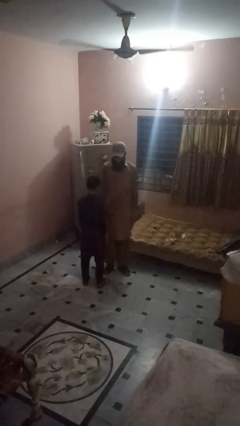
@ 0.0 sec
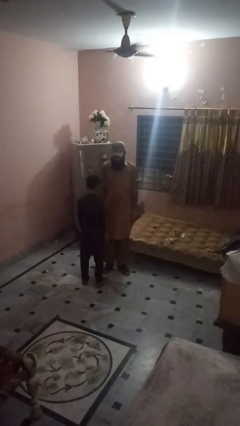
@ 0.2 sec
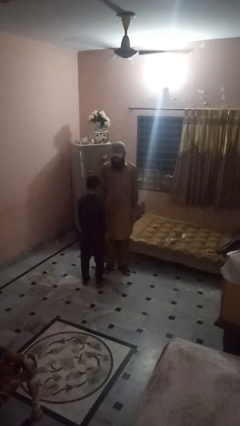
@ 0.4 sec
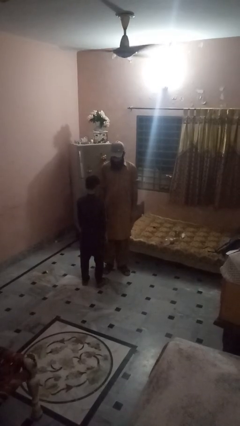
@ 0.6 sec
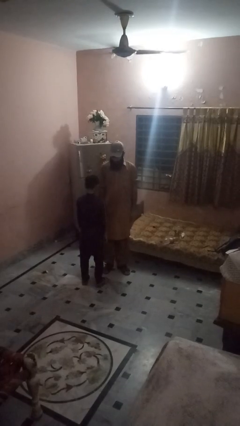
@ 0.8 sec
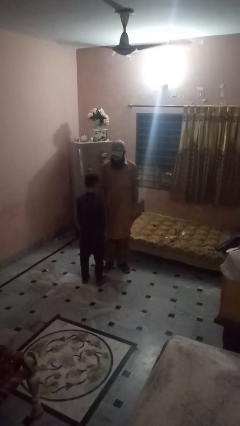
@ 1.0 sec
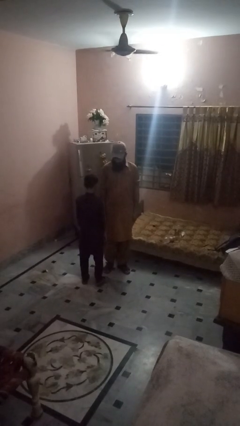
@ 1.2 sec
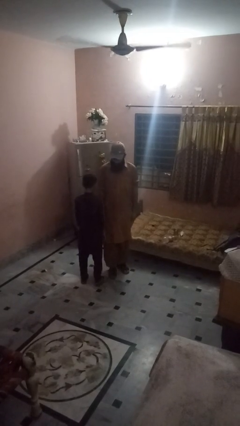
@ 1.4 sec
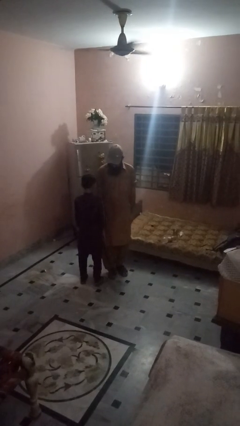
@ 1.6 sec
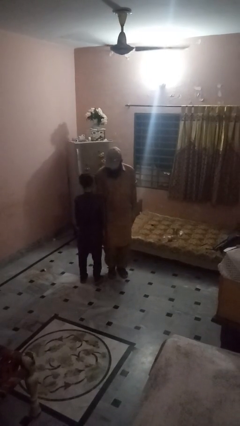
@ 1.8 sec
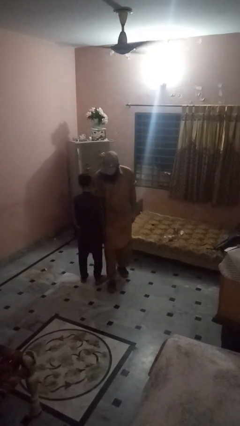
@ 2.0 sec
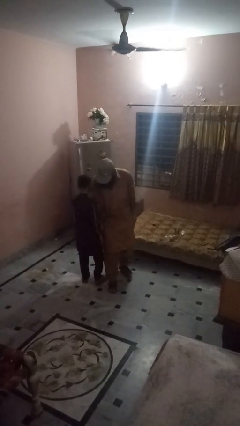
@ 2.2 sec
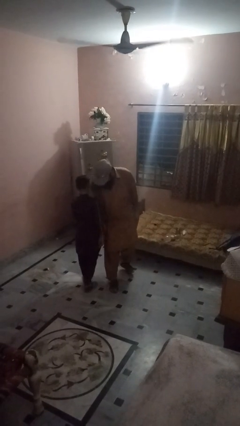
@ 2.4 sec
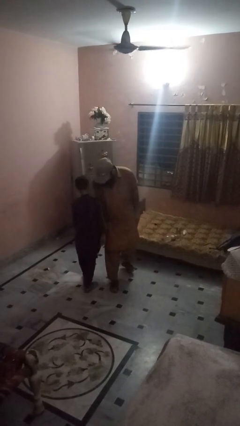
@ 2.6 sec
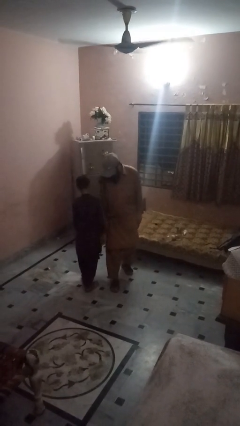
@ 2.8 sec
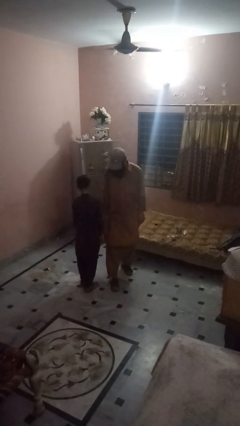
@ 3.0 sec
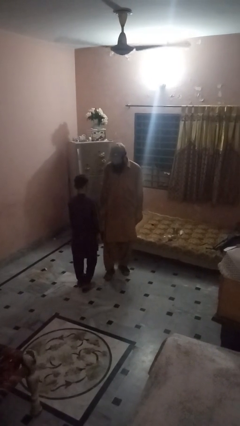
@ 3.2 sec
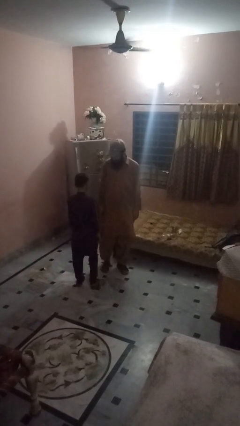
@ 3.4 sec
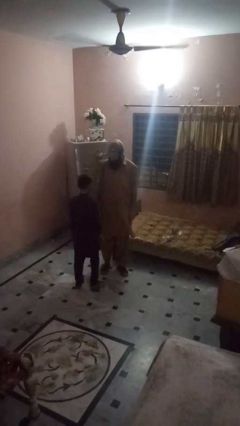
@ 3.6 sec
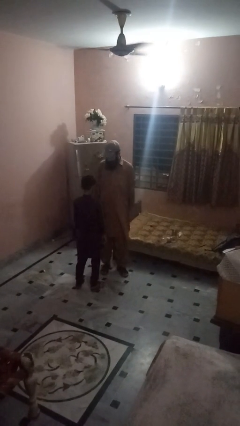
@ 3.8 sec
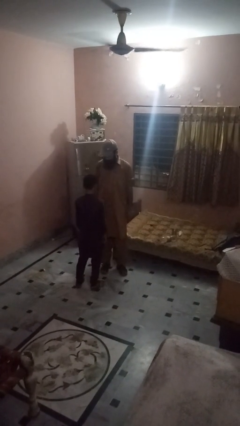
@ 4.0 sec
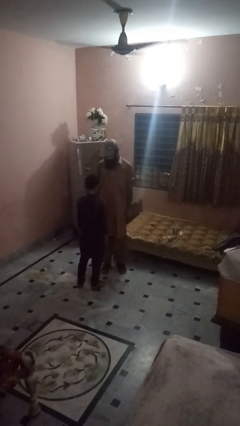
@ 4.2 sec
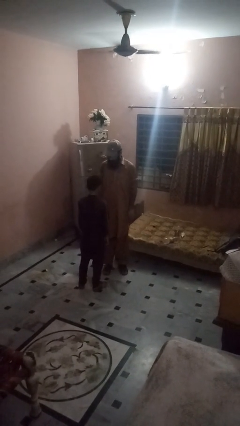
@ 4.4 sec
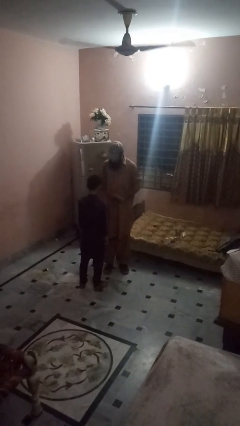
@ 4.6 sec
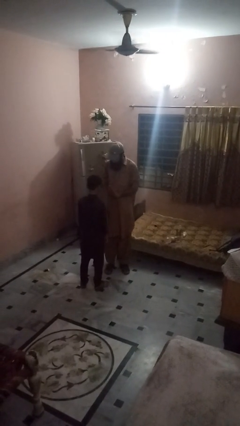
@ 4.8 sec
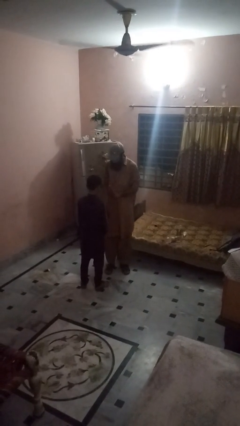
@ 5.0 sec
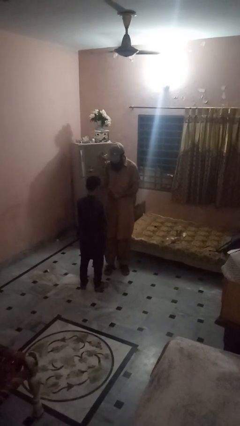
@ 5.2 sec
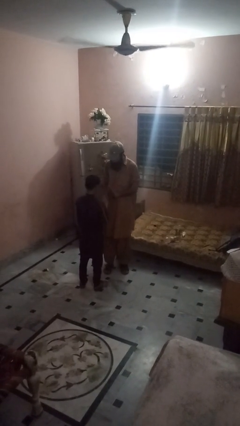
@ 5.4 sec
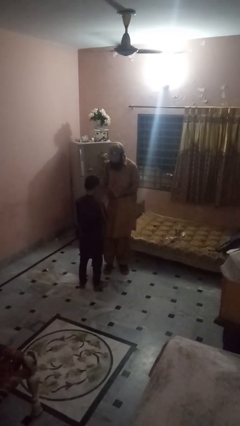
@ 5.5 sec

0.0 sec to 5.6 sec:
person bumps into person

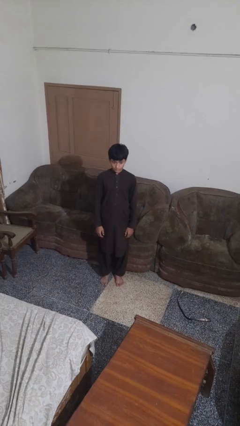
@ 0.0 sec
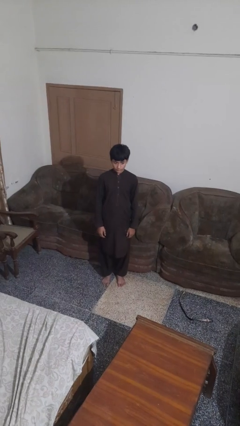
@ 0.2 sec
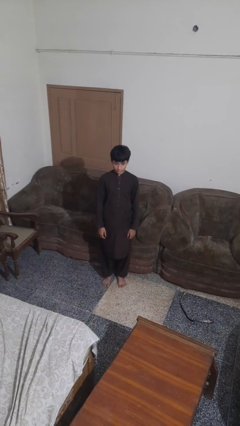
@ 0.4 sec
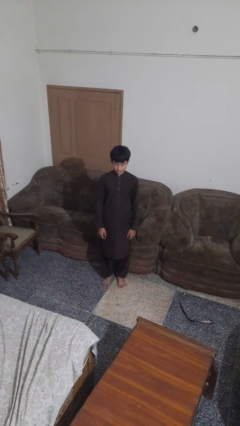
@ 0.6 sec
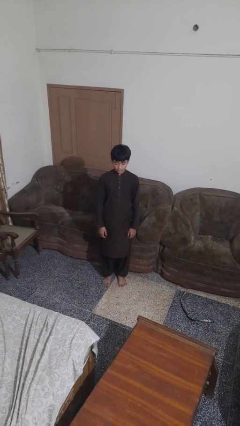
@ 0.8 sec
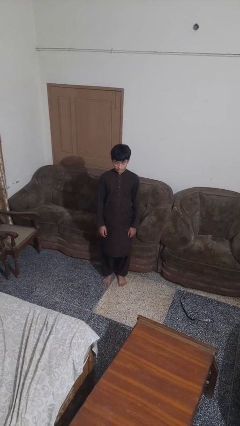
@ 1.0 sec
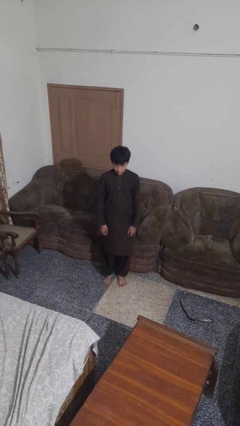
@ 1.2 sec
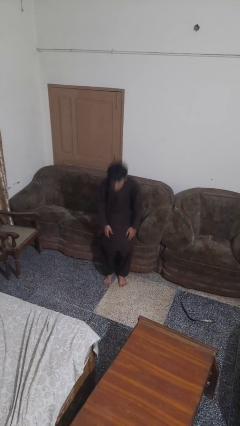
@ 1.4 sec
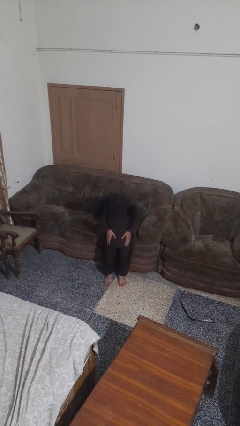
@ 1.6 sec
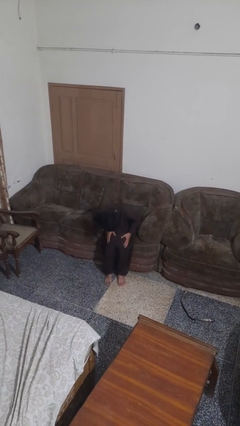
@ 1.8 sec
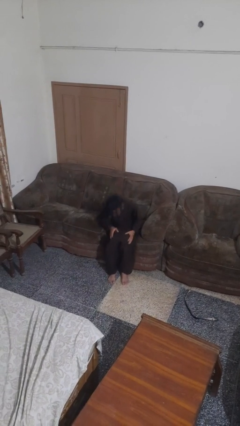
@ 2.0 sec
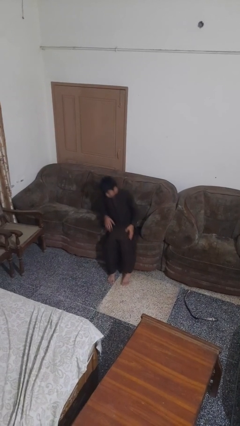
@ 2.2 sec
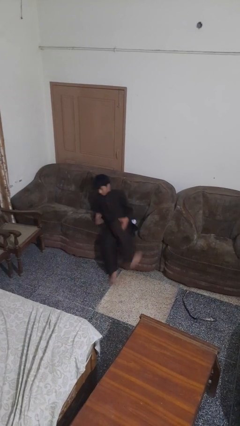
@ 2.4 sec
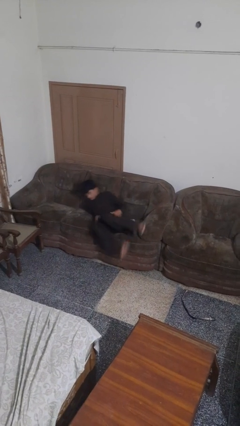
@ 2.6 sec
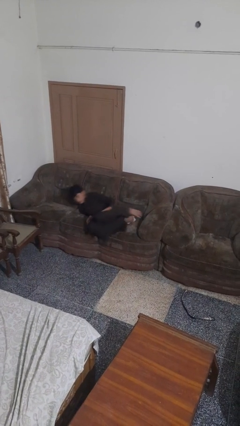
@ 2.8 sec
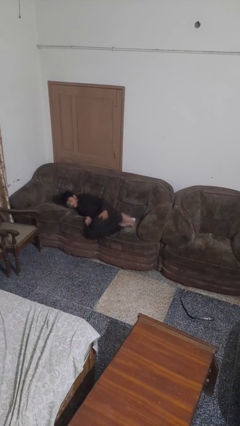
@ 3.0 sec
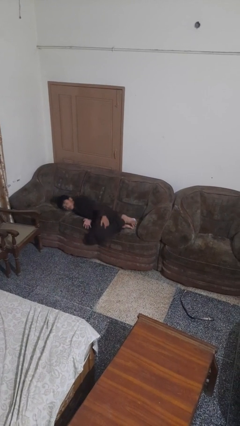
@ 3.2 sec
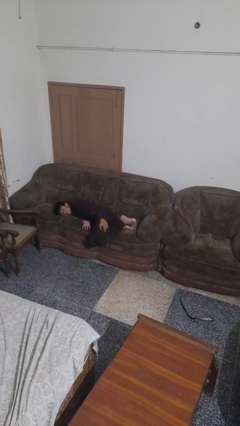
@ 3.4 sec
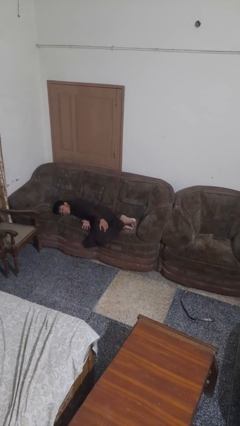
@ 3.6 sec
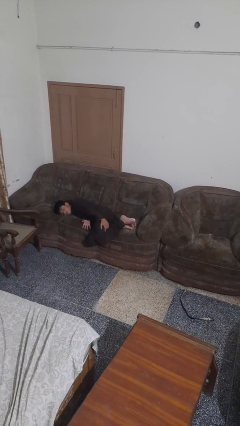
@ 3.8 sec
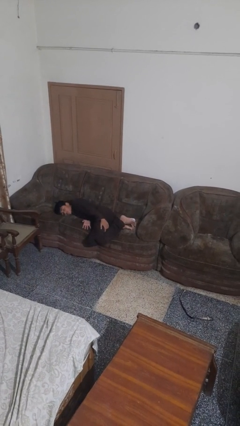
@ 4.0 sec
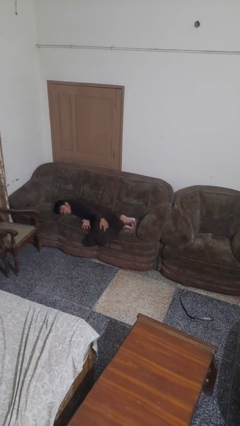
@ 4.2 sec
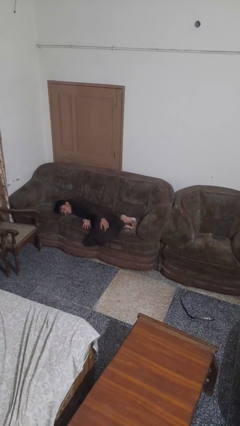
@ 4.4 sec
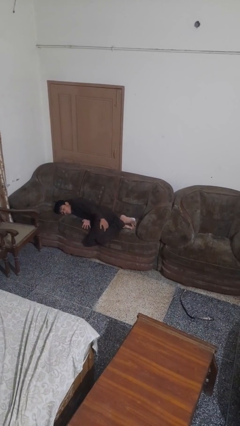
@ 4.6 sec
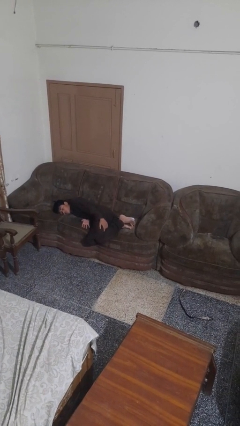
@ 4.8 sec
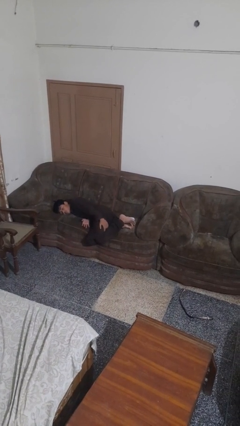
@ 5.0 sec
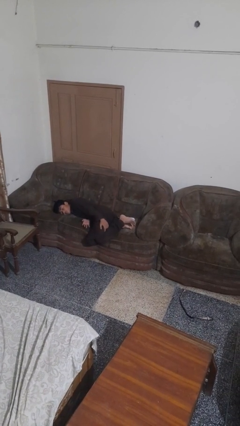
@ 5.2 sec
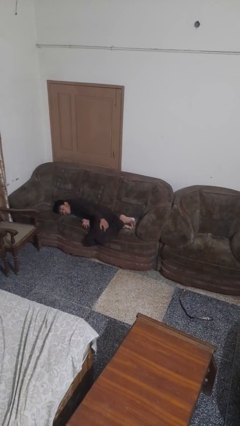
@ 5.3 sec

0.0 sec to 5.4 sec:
person lies down on couch

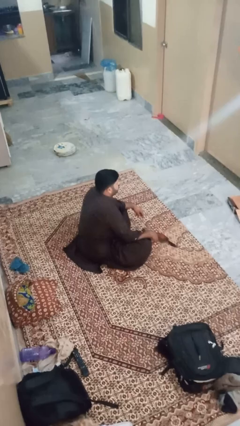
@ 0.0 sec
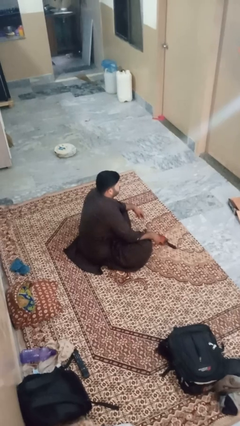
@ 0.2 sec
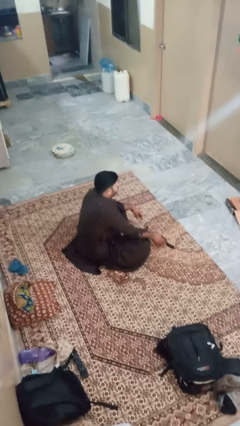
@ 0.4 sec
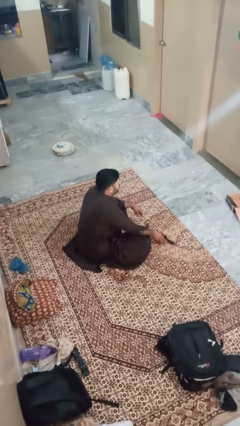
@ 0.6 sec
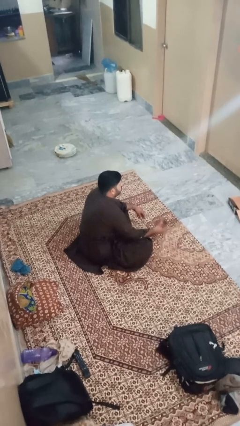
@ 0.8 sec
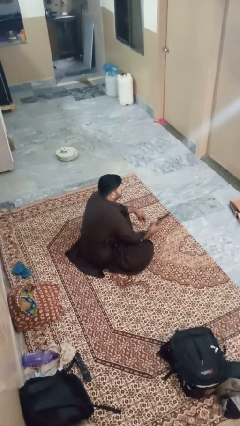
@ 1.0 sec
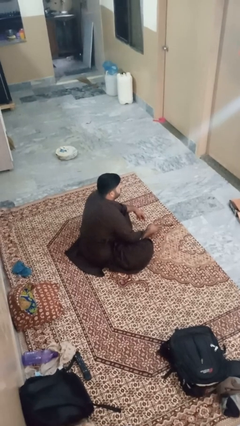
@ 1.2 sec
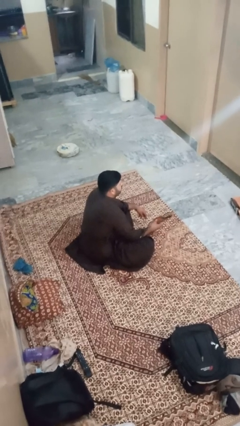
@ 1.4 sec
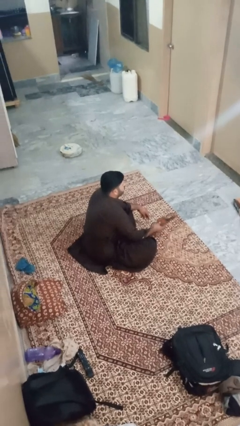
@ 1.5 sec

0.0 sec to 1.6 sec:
person picks up object from floor

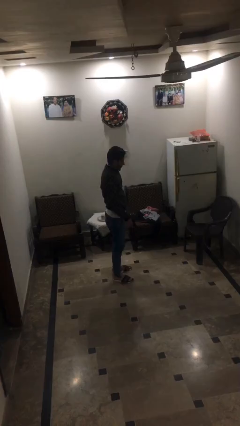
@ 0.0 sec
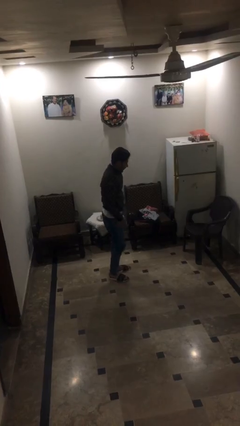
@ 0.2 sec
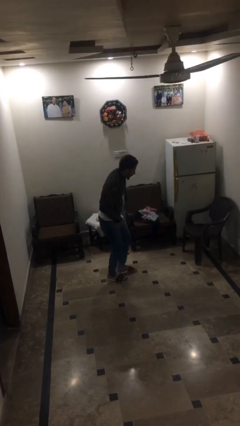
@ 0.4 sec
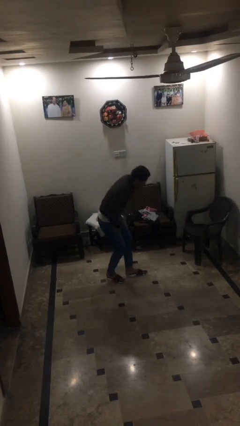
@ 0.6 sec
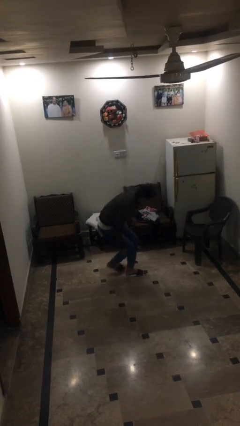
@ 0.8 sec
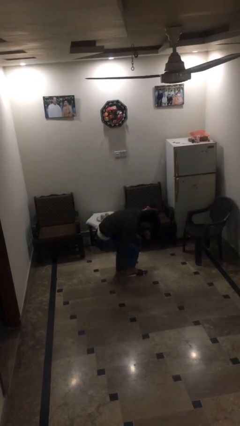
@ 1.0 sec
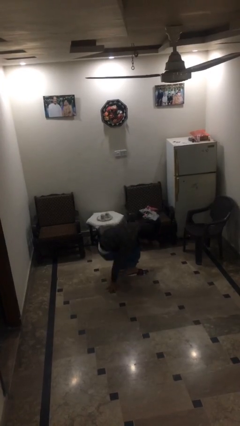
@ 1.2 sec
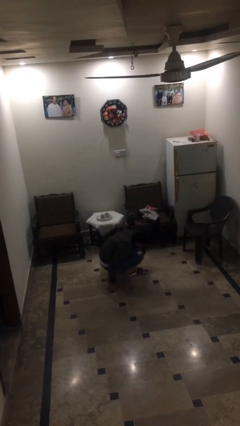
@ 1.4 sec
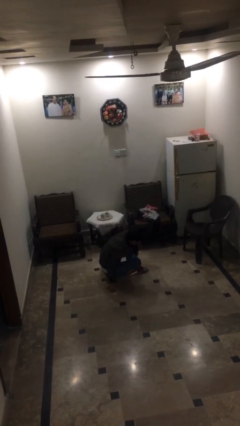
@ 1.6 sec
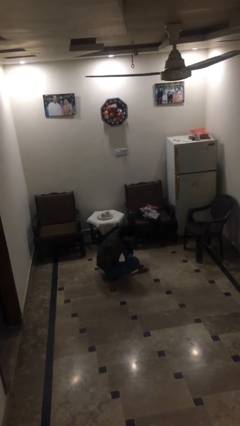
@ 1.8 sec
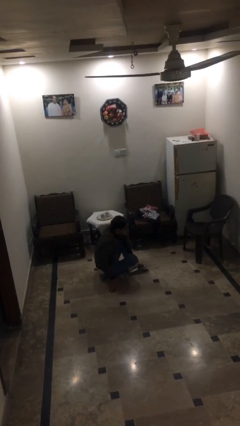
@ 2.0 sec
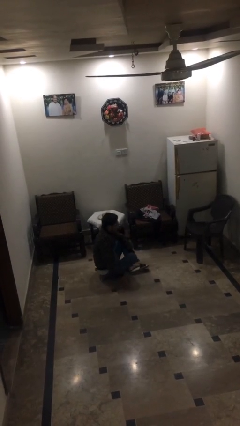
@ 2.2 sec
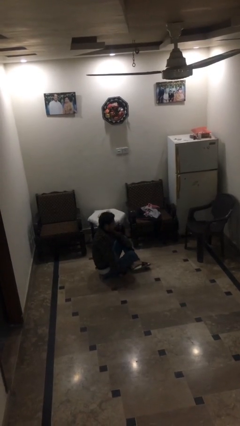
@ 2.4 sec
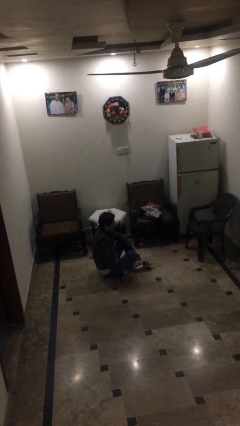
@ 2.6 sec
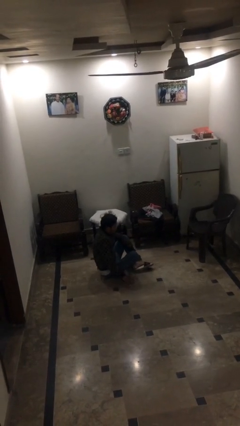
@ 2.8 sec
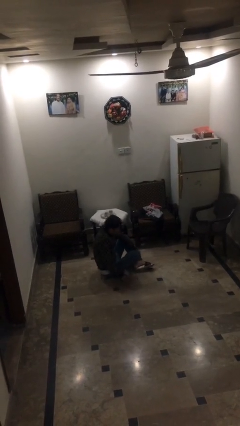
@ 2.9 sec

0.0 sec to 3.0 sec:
person sits down

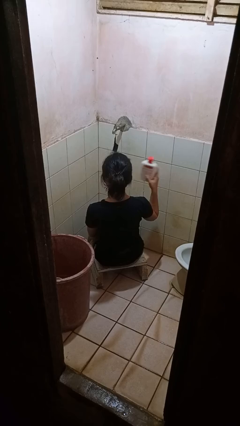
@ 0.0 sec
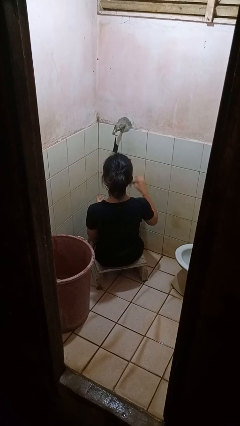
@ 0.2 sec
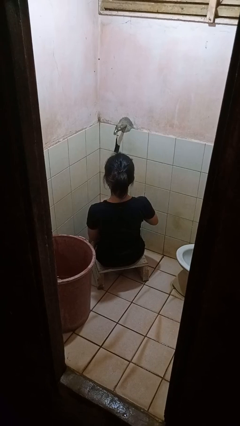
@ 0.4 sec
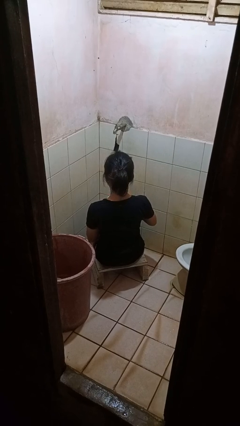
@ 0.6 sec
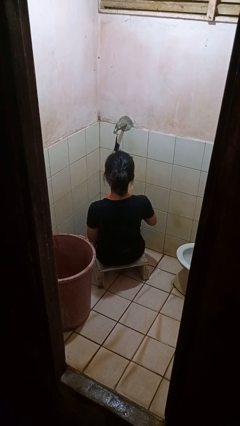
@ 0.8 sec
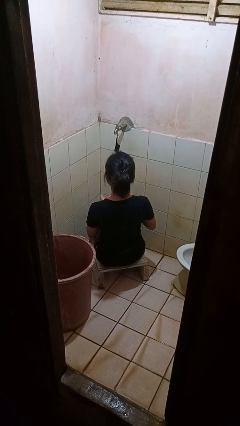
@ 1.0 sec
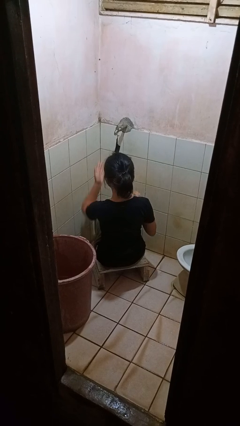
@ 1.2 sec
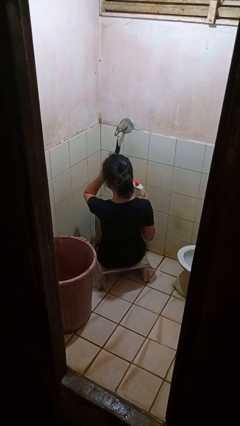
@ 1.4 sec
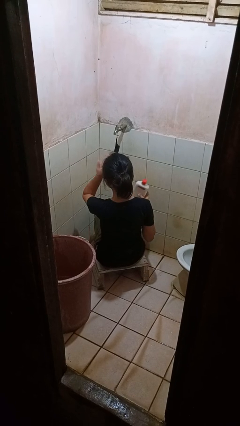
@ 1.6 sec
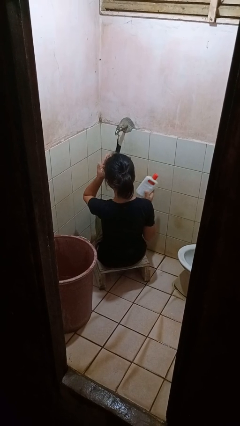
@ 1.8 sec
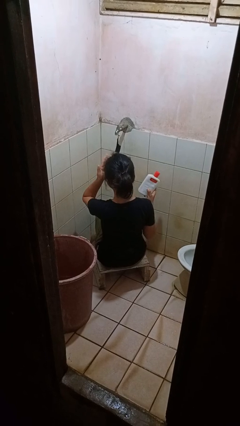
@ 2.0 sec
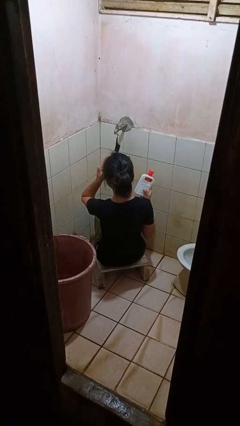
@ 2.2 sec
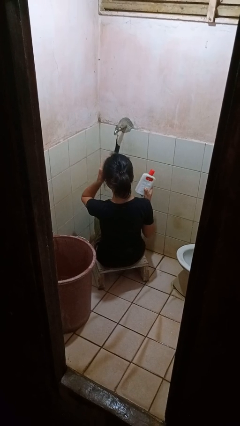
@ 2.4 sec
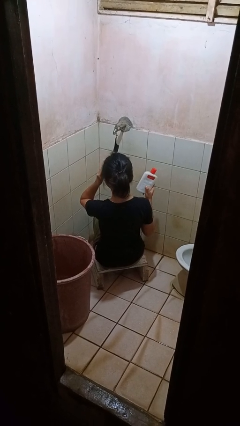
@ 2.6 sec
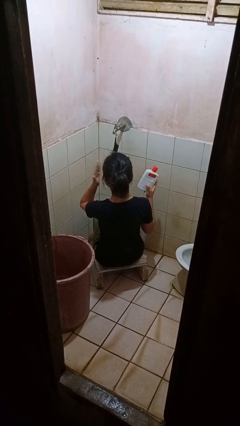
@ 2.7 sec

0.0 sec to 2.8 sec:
person applies facial moisturizer
